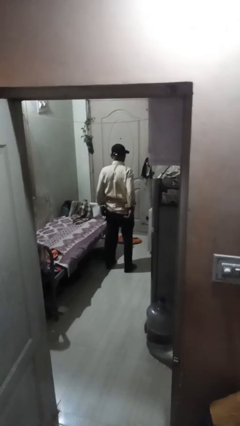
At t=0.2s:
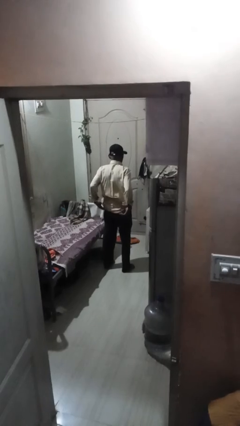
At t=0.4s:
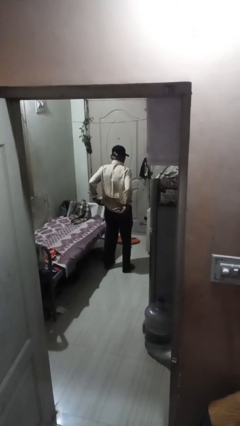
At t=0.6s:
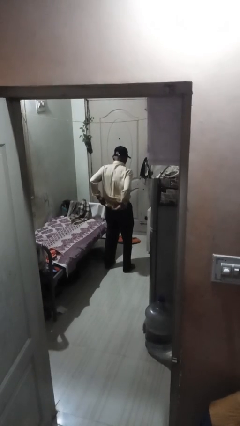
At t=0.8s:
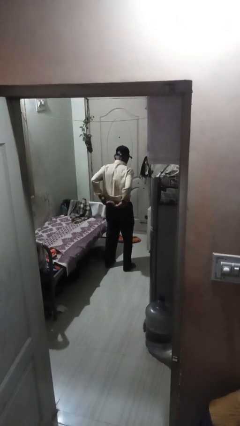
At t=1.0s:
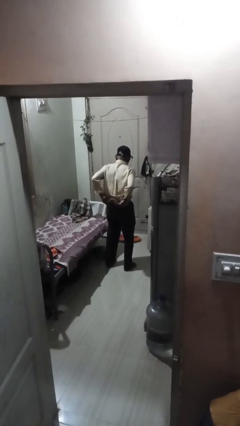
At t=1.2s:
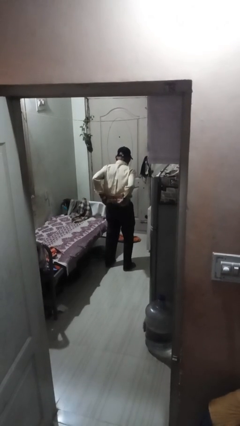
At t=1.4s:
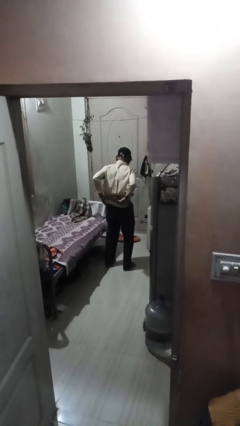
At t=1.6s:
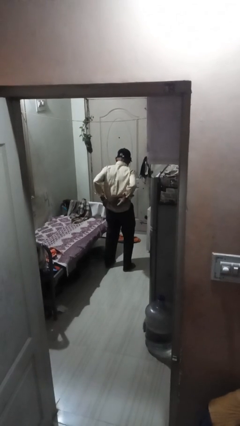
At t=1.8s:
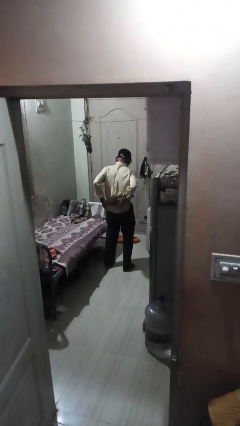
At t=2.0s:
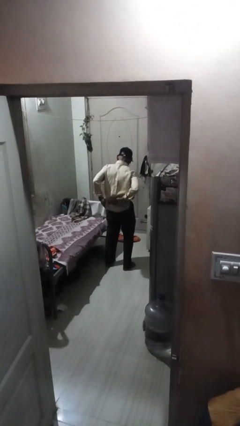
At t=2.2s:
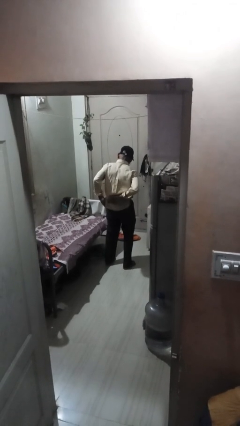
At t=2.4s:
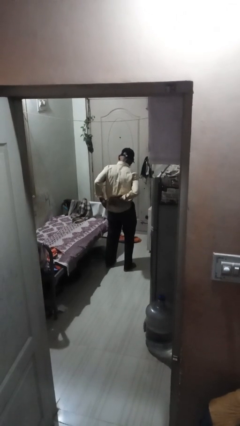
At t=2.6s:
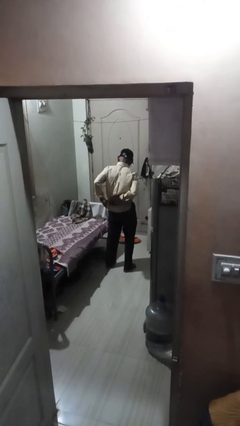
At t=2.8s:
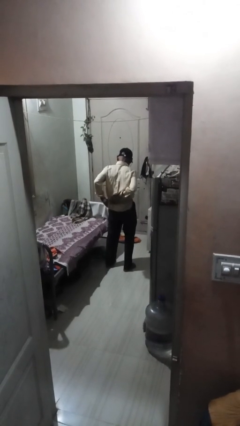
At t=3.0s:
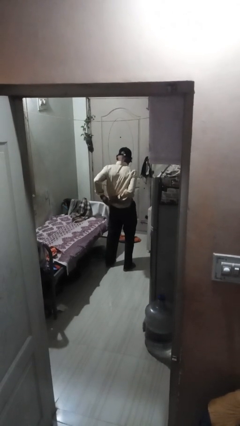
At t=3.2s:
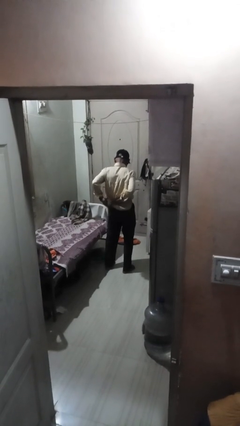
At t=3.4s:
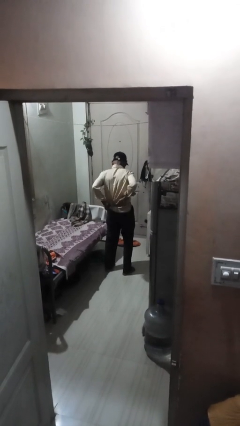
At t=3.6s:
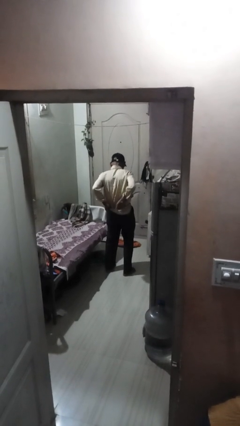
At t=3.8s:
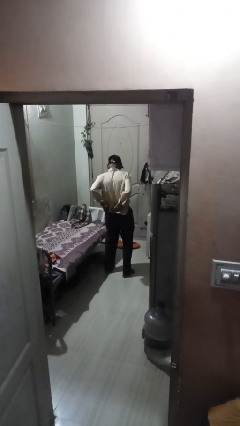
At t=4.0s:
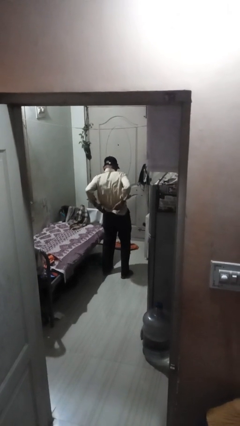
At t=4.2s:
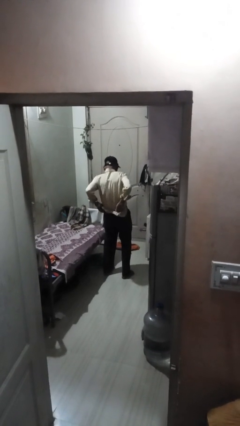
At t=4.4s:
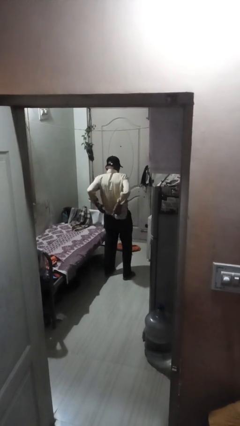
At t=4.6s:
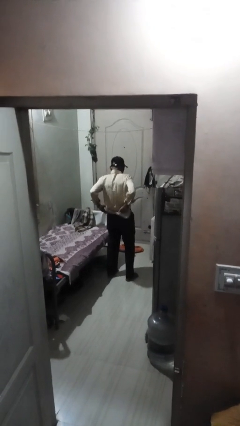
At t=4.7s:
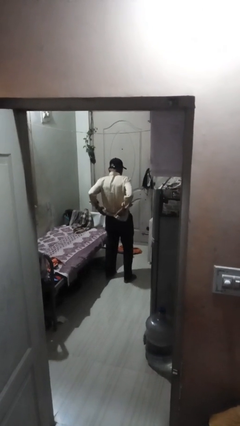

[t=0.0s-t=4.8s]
person tucks in shirt

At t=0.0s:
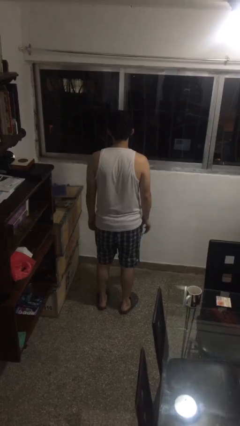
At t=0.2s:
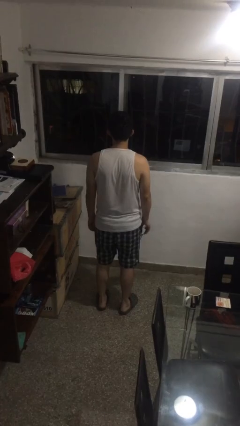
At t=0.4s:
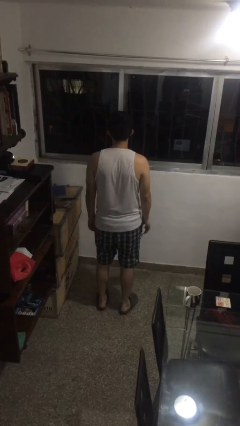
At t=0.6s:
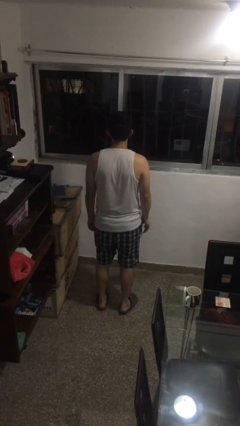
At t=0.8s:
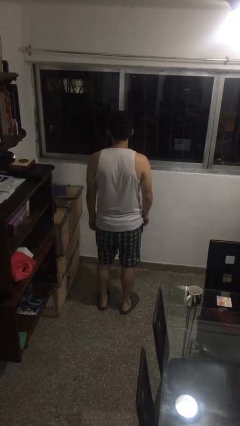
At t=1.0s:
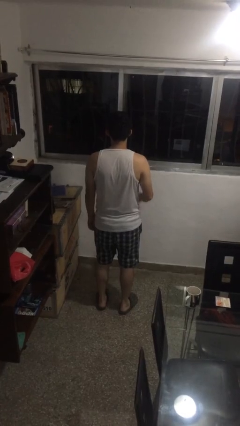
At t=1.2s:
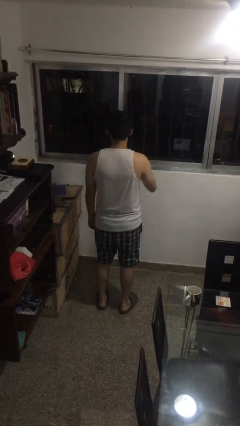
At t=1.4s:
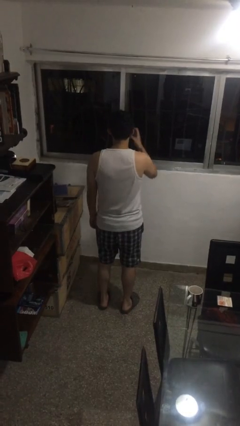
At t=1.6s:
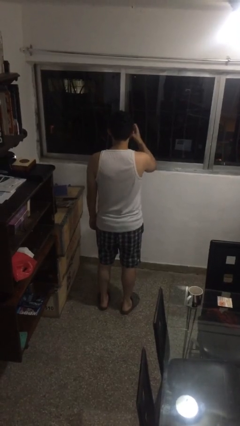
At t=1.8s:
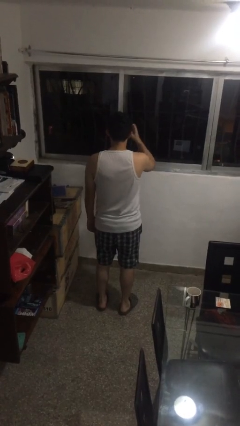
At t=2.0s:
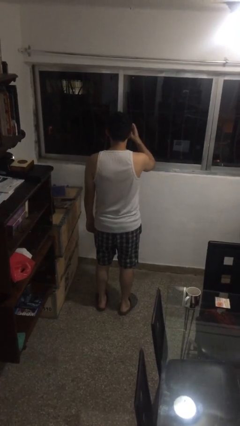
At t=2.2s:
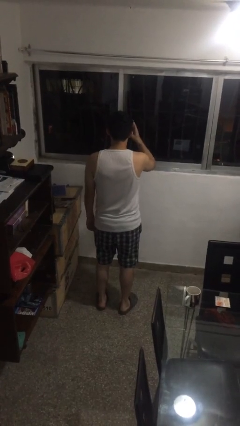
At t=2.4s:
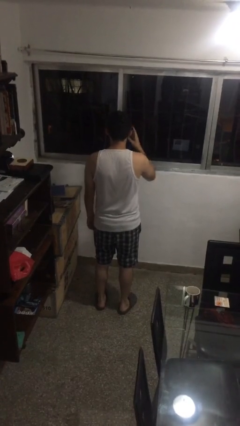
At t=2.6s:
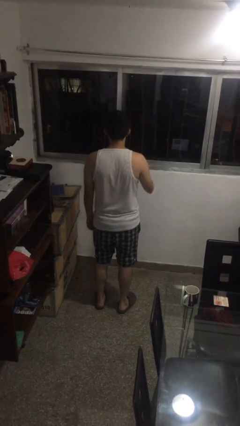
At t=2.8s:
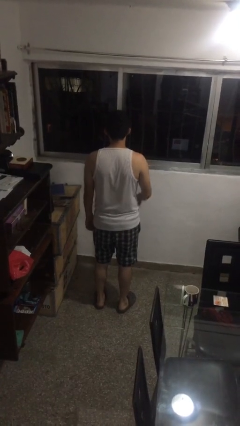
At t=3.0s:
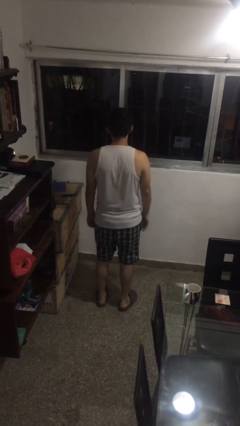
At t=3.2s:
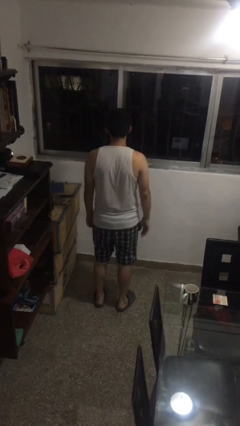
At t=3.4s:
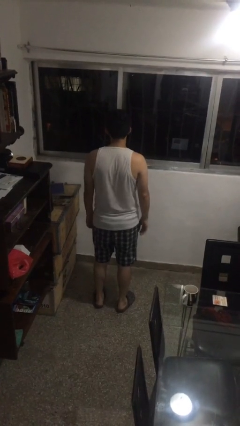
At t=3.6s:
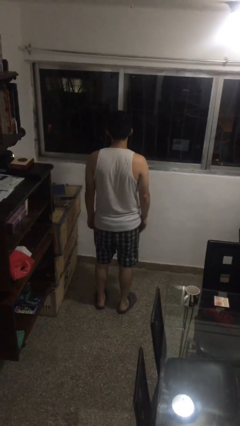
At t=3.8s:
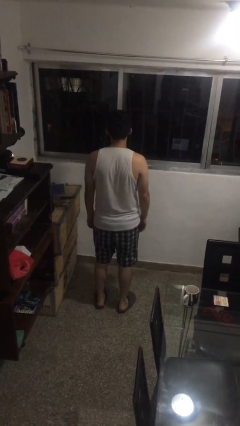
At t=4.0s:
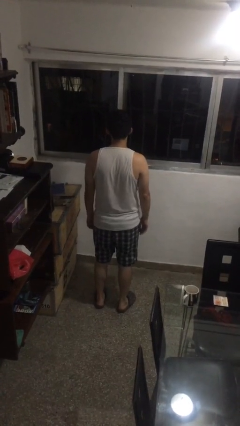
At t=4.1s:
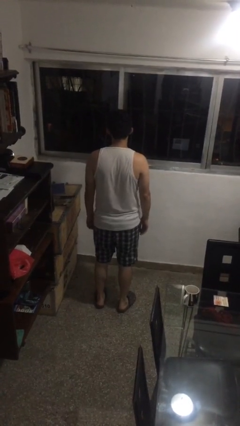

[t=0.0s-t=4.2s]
person puts on glasses

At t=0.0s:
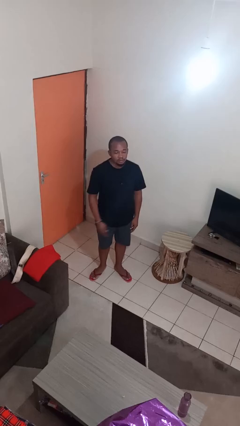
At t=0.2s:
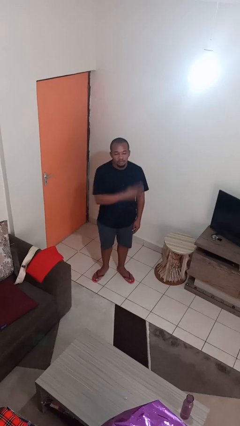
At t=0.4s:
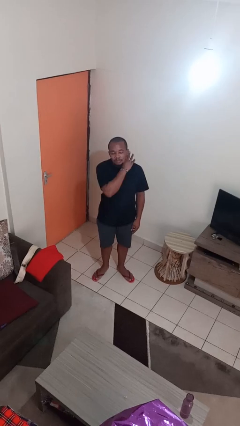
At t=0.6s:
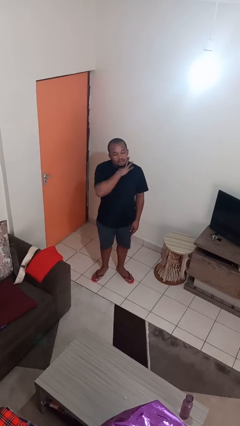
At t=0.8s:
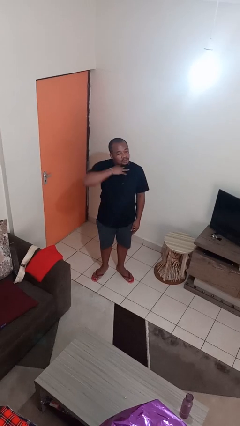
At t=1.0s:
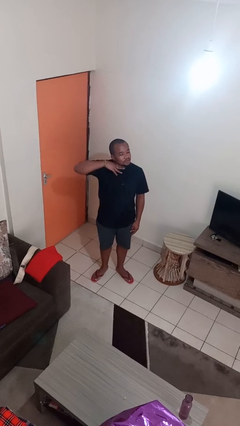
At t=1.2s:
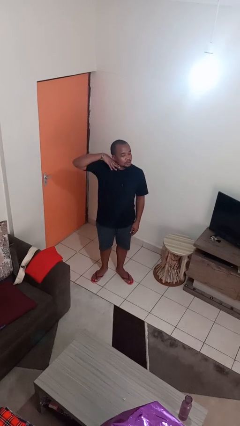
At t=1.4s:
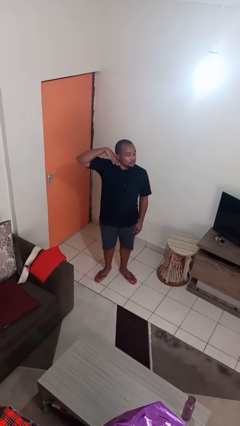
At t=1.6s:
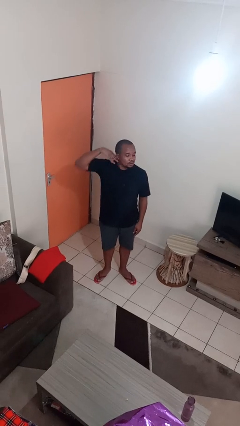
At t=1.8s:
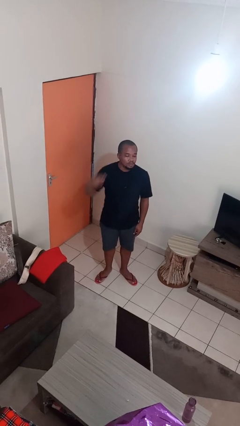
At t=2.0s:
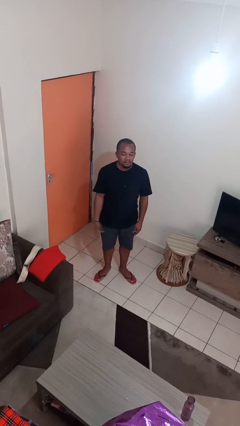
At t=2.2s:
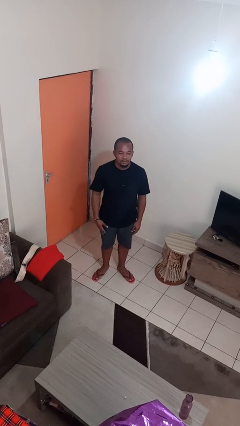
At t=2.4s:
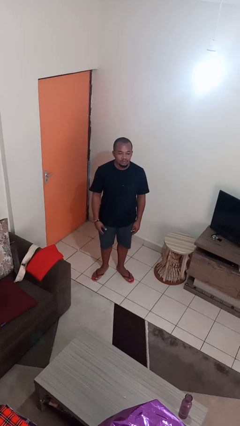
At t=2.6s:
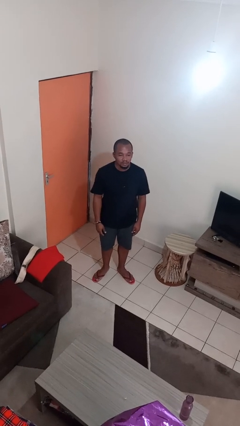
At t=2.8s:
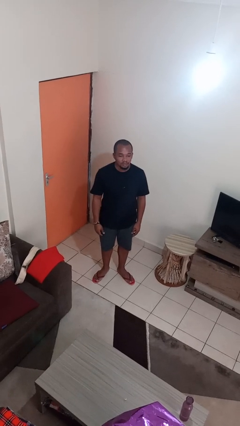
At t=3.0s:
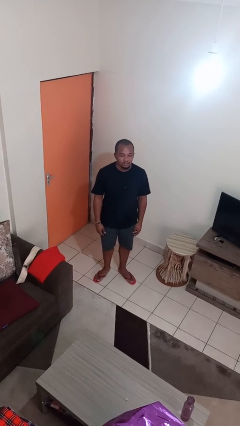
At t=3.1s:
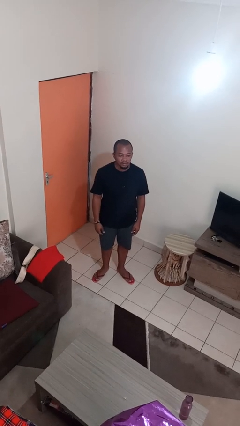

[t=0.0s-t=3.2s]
person gestures cut

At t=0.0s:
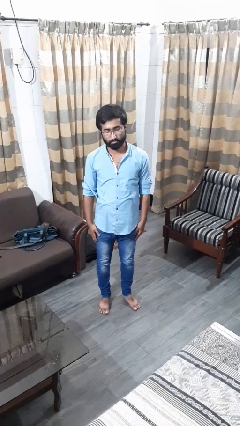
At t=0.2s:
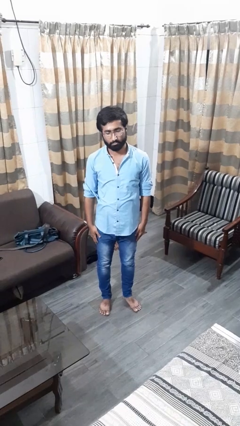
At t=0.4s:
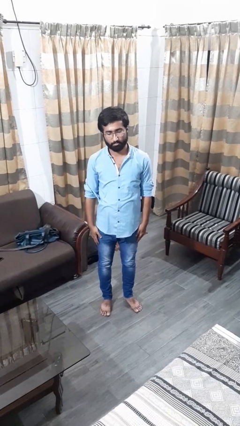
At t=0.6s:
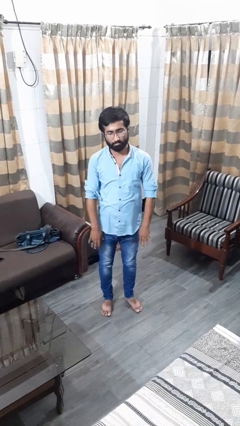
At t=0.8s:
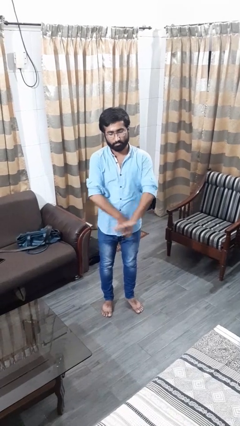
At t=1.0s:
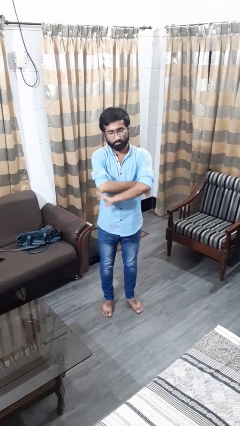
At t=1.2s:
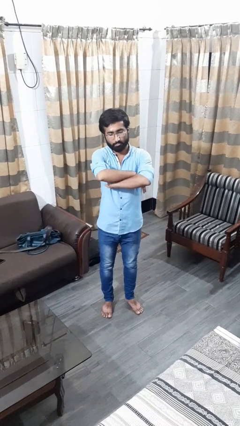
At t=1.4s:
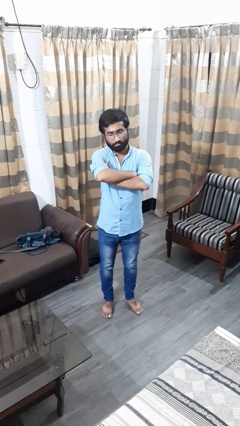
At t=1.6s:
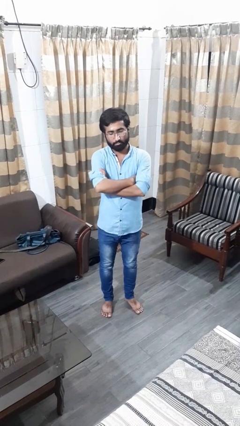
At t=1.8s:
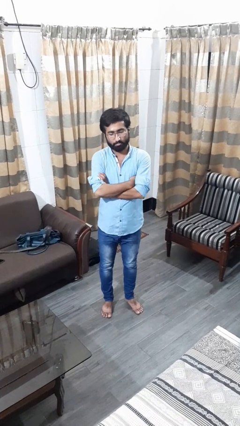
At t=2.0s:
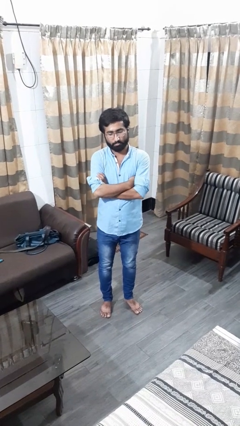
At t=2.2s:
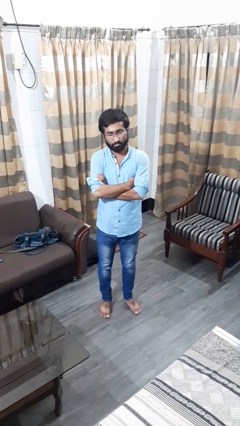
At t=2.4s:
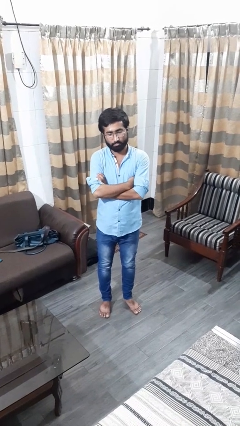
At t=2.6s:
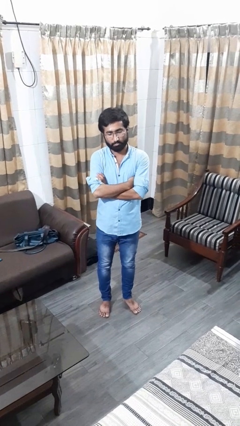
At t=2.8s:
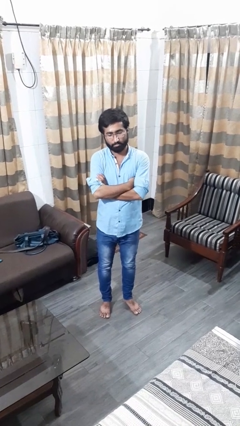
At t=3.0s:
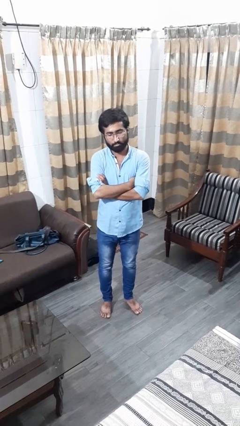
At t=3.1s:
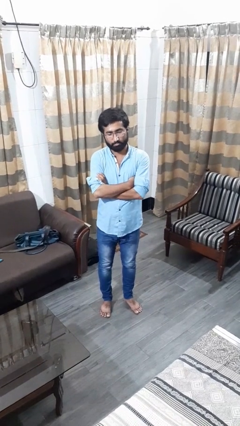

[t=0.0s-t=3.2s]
person crosses arms

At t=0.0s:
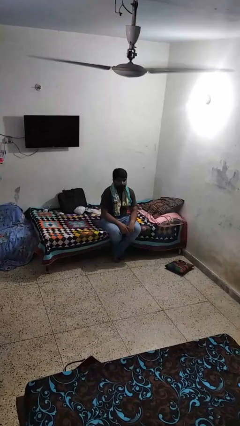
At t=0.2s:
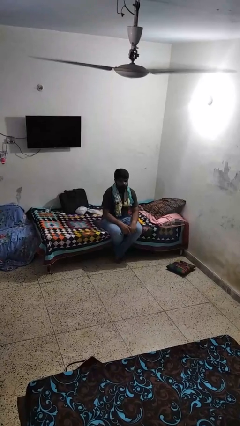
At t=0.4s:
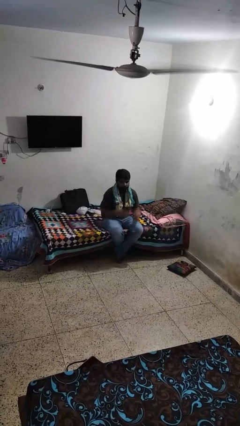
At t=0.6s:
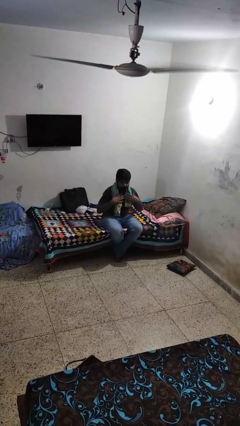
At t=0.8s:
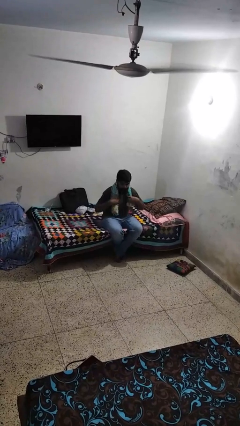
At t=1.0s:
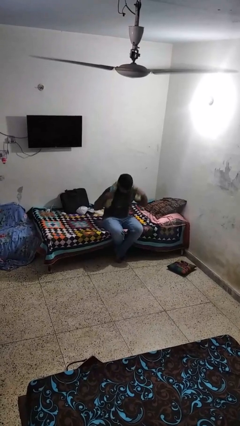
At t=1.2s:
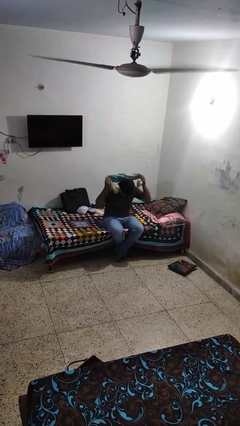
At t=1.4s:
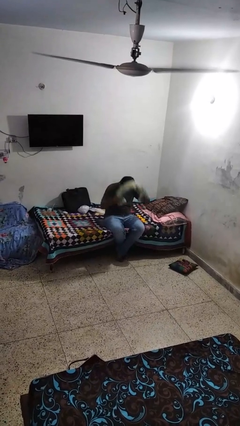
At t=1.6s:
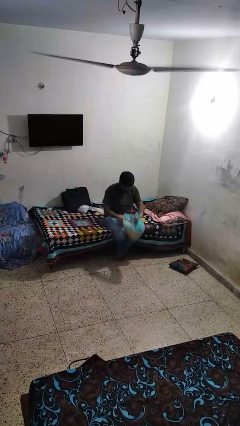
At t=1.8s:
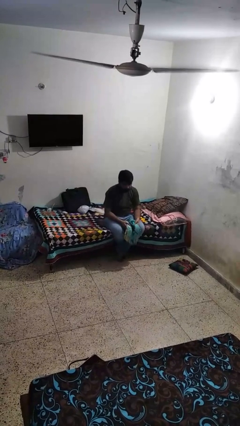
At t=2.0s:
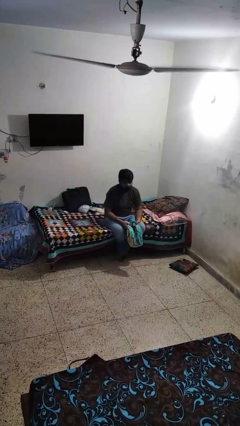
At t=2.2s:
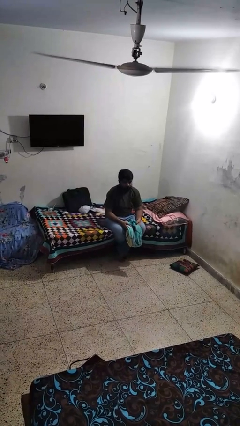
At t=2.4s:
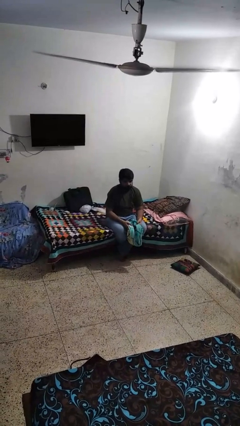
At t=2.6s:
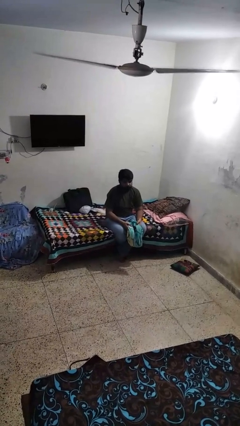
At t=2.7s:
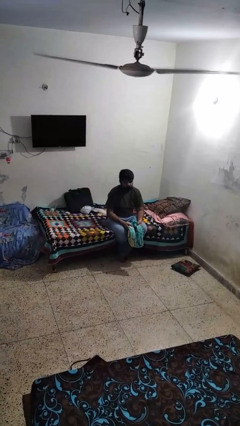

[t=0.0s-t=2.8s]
person takes off scarf
